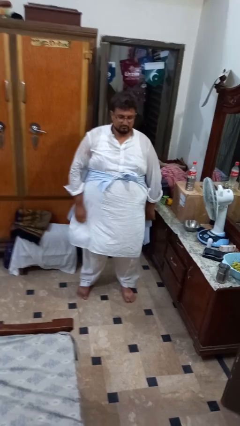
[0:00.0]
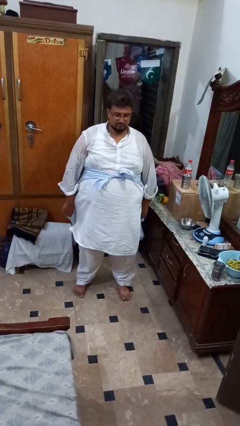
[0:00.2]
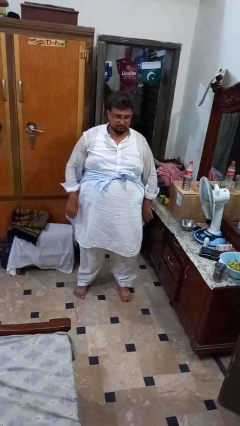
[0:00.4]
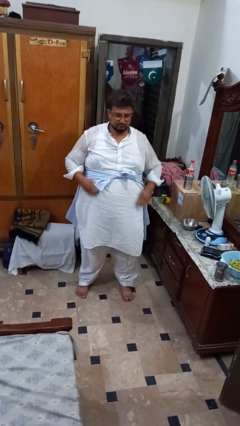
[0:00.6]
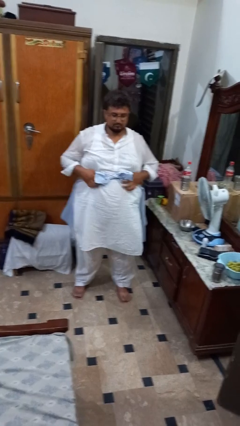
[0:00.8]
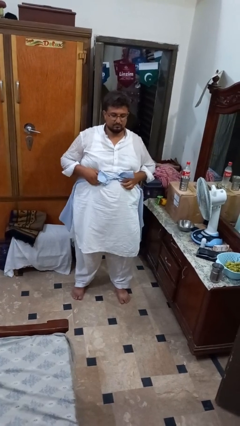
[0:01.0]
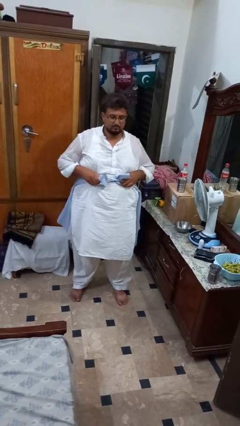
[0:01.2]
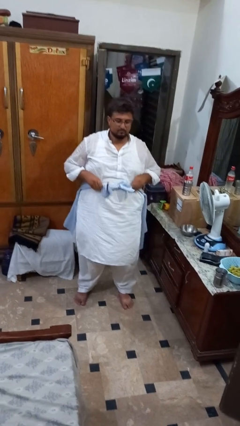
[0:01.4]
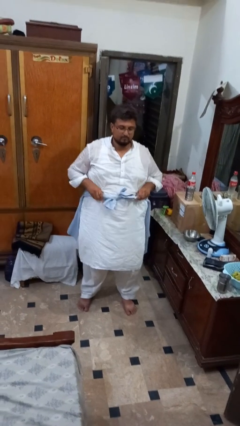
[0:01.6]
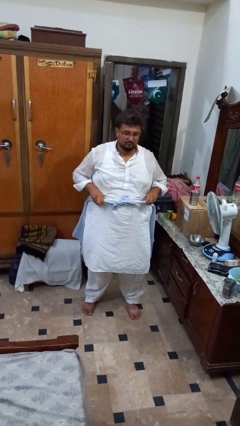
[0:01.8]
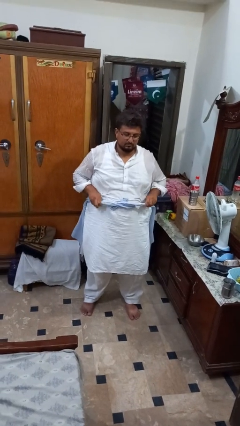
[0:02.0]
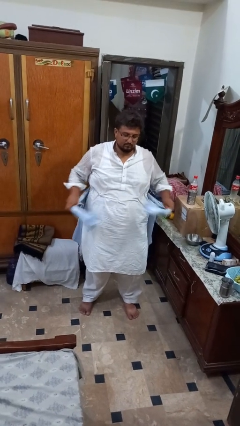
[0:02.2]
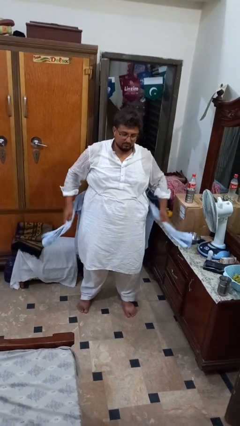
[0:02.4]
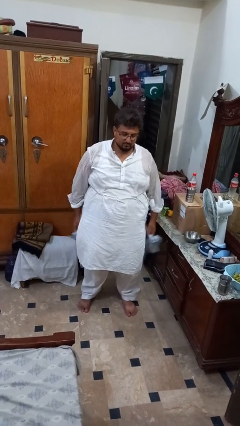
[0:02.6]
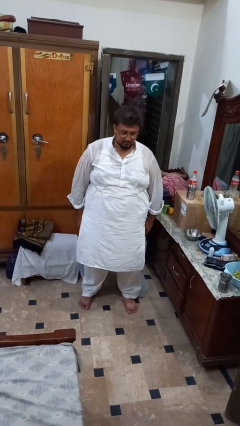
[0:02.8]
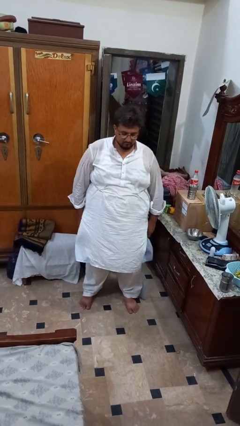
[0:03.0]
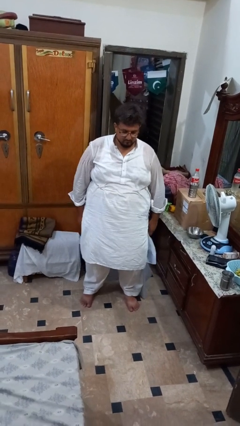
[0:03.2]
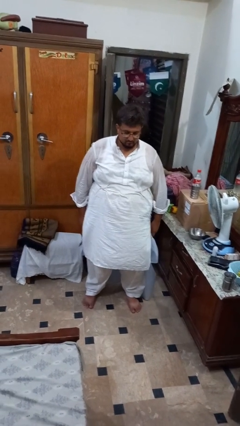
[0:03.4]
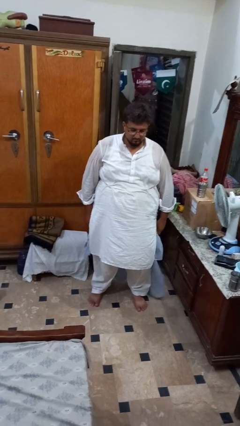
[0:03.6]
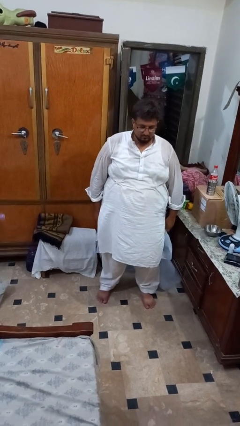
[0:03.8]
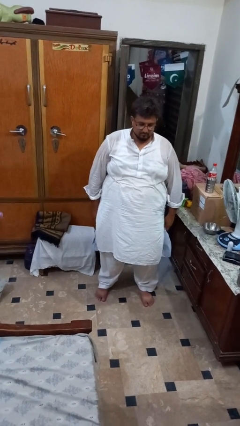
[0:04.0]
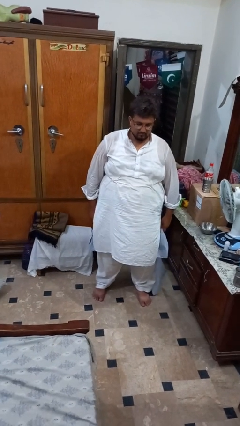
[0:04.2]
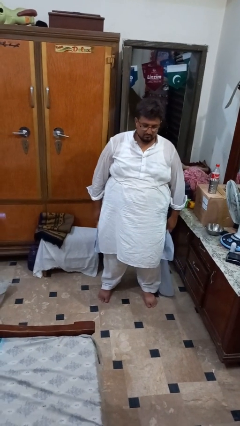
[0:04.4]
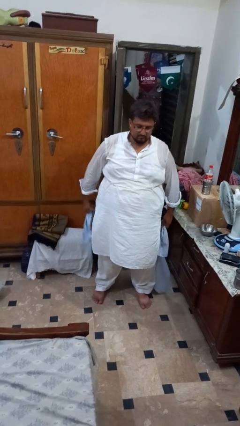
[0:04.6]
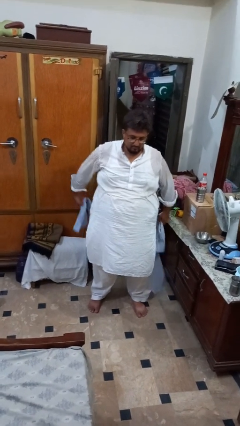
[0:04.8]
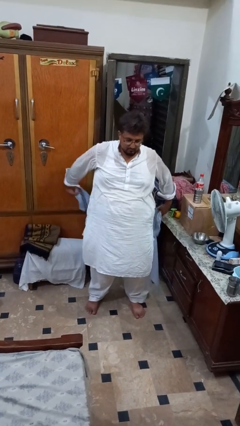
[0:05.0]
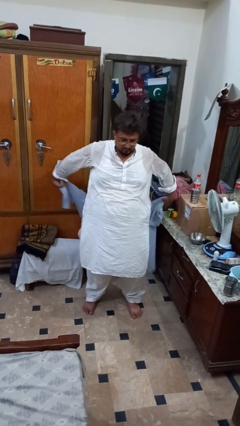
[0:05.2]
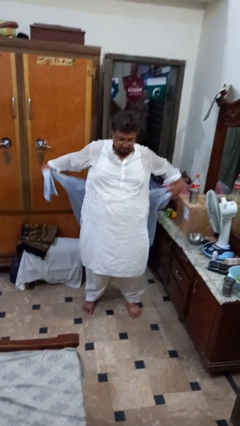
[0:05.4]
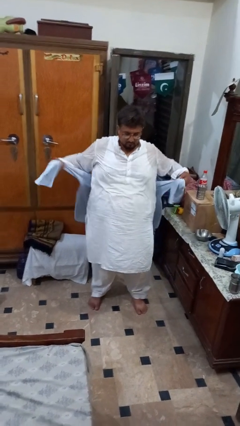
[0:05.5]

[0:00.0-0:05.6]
person unties jacket around waist

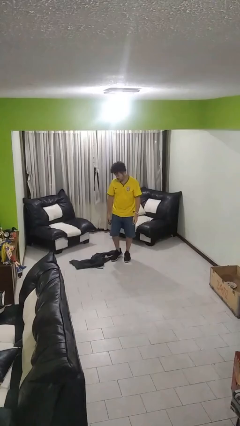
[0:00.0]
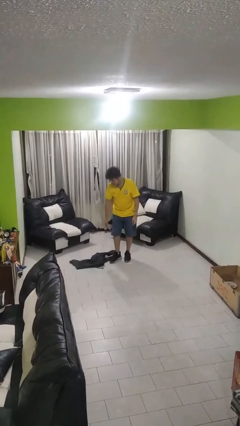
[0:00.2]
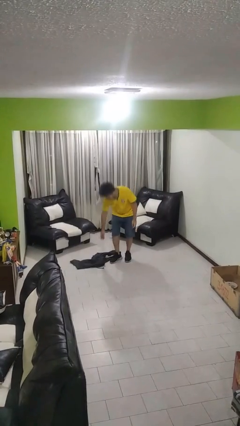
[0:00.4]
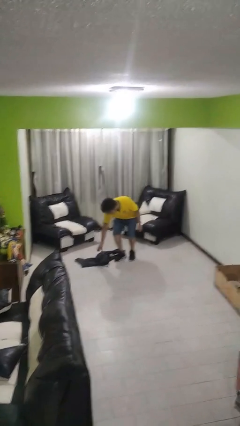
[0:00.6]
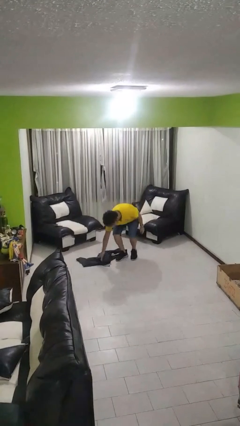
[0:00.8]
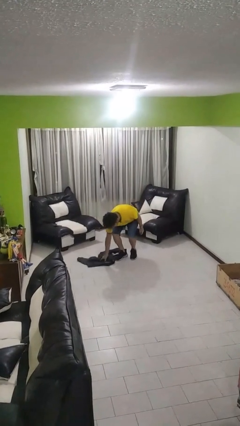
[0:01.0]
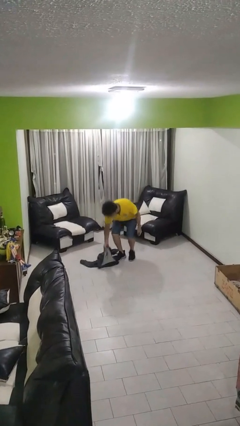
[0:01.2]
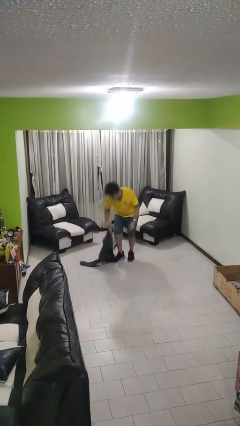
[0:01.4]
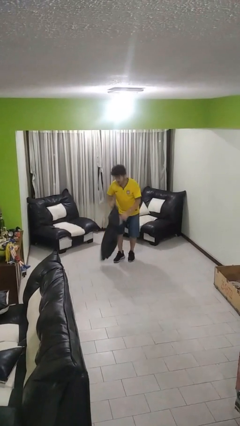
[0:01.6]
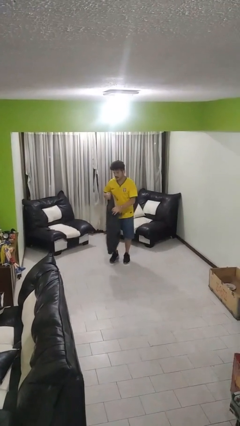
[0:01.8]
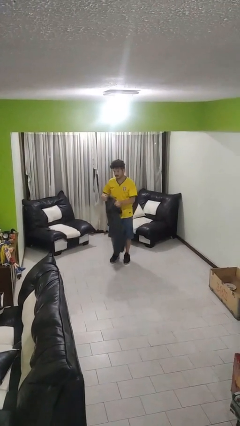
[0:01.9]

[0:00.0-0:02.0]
person picks up object from floor

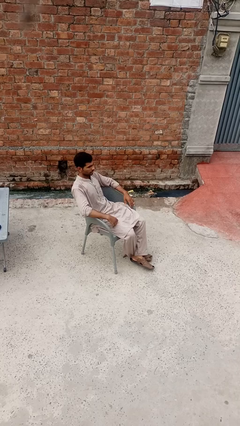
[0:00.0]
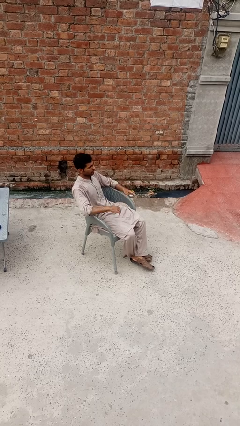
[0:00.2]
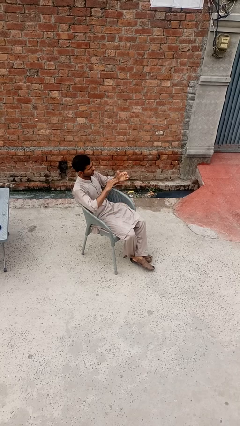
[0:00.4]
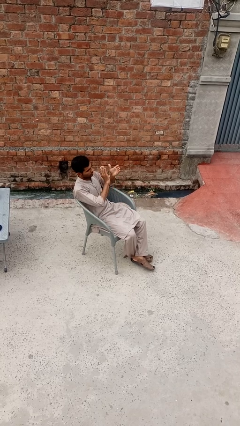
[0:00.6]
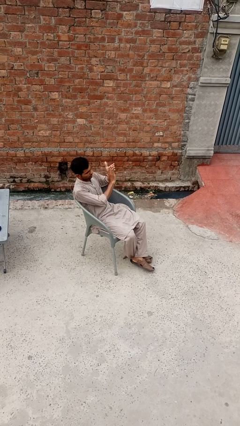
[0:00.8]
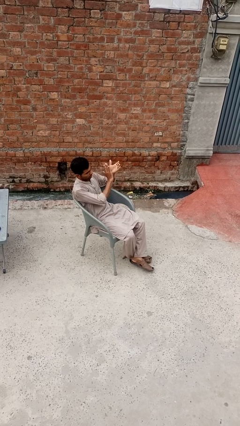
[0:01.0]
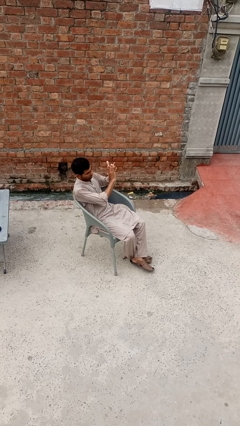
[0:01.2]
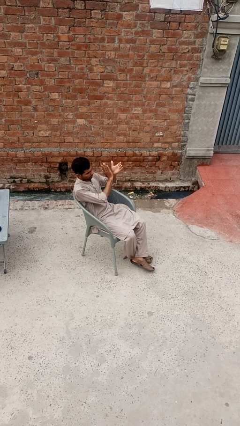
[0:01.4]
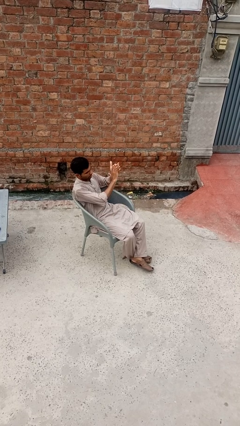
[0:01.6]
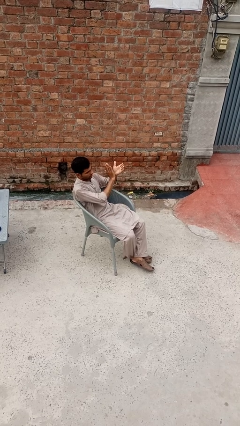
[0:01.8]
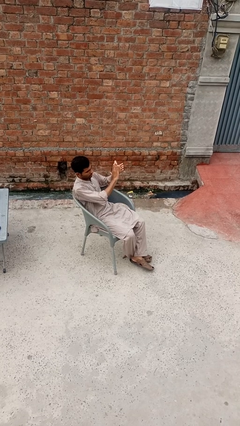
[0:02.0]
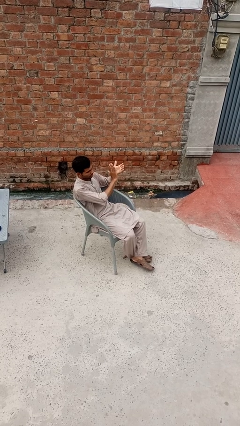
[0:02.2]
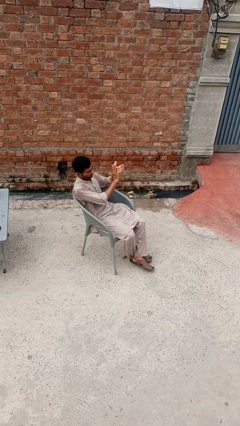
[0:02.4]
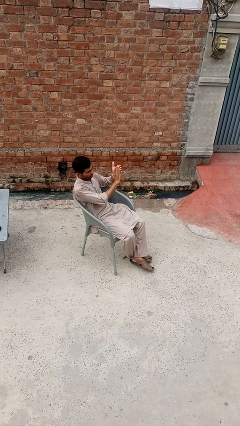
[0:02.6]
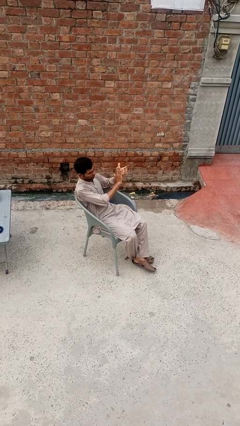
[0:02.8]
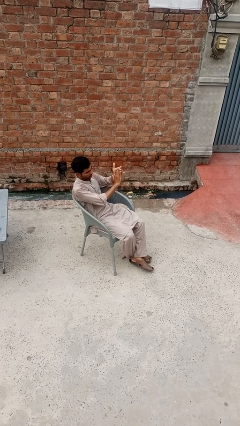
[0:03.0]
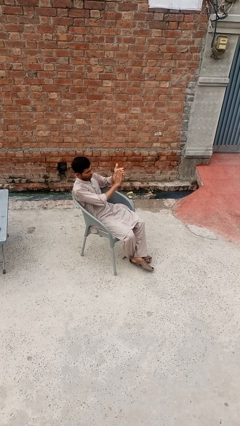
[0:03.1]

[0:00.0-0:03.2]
person claps hands

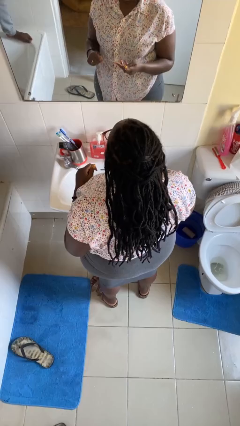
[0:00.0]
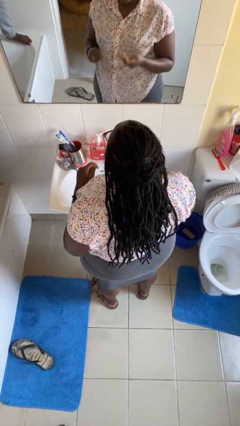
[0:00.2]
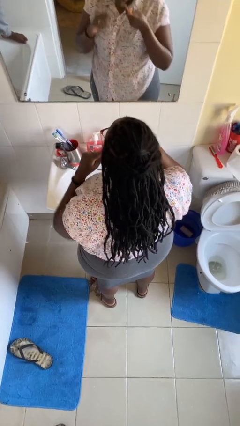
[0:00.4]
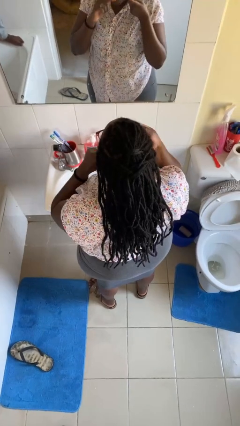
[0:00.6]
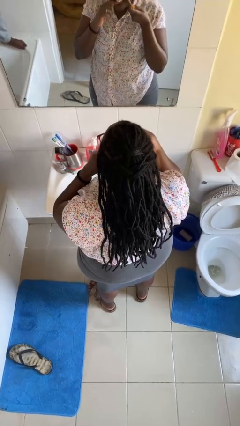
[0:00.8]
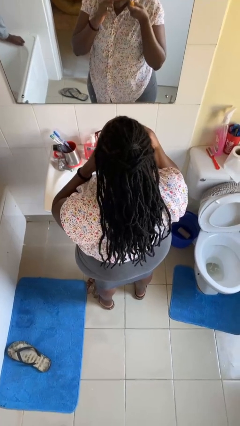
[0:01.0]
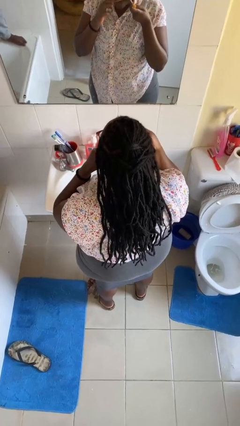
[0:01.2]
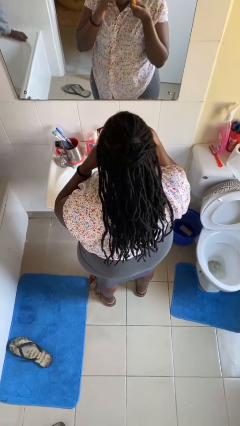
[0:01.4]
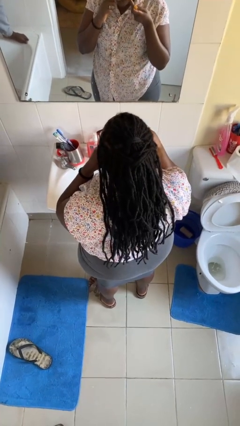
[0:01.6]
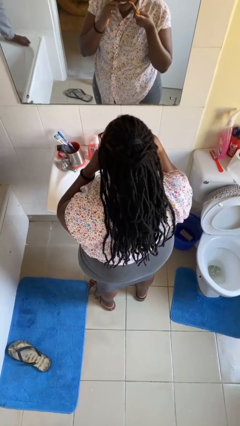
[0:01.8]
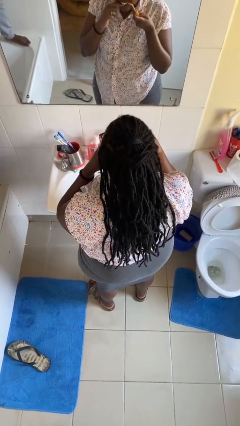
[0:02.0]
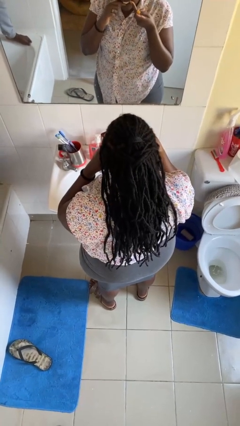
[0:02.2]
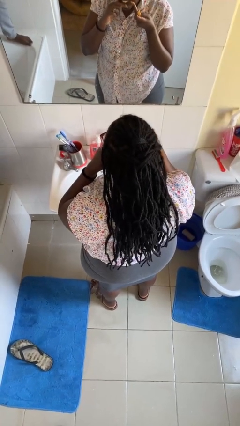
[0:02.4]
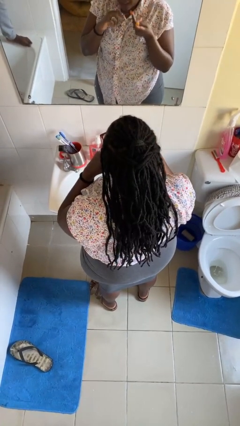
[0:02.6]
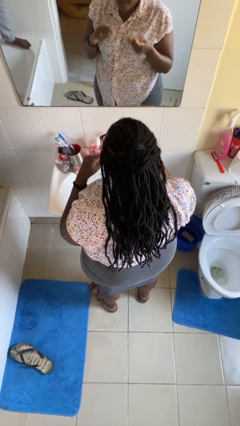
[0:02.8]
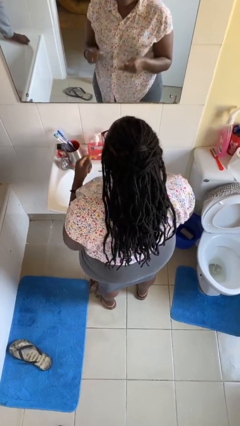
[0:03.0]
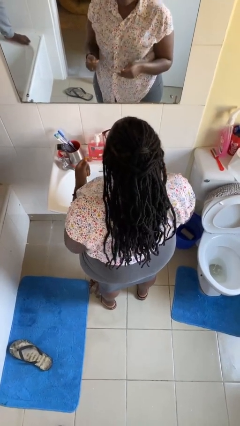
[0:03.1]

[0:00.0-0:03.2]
person flosses

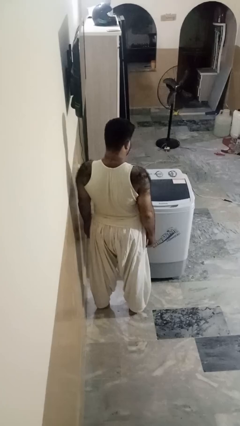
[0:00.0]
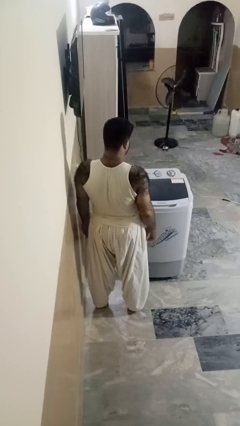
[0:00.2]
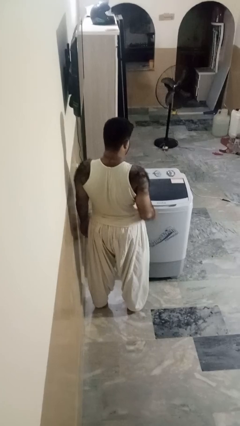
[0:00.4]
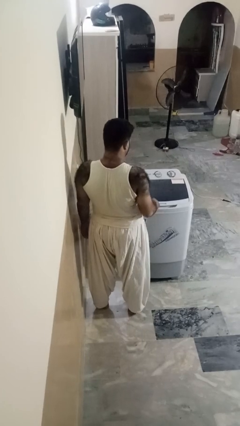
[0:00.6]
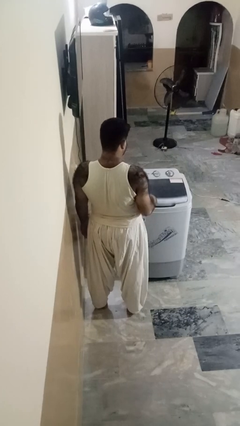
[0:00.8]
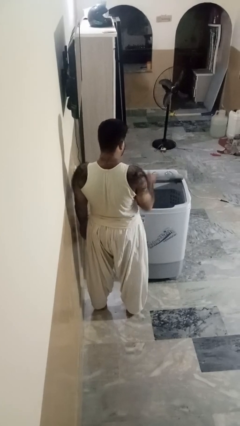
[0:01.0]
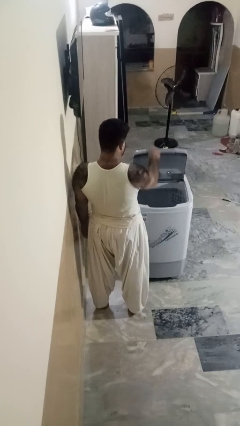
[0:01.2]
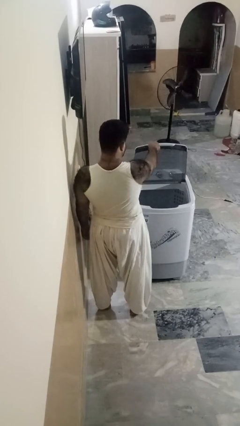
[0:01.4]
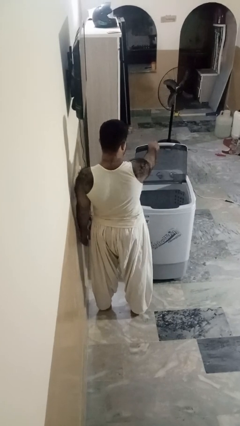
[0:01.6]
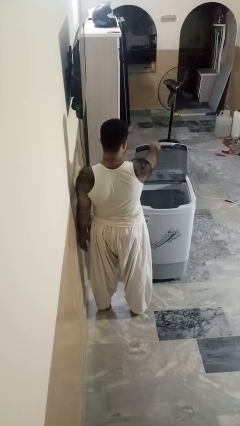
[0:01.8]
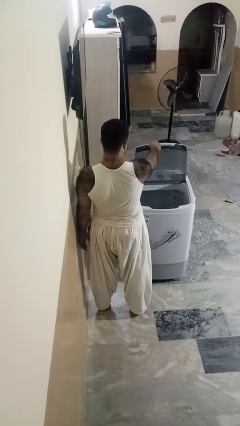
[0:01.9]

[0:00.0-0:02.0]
person opens clothes washer

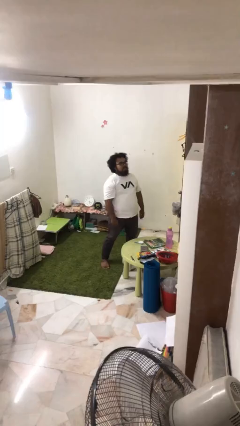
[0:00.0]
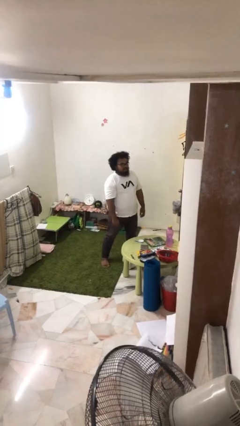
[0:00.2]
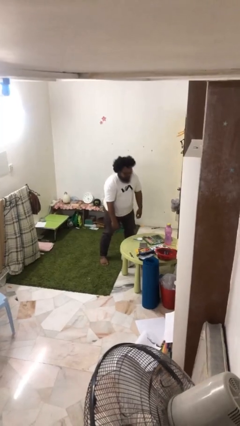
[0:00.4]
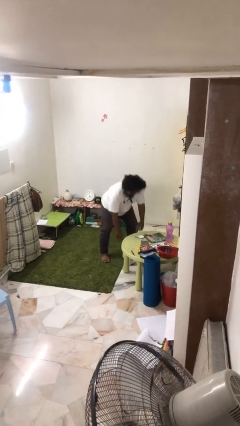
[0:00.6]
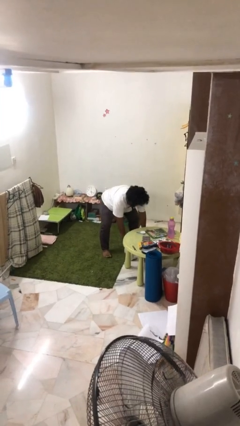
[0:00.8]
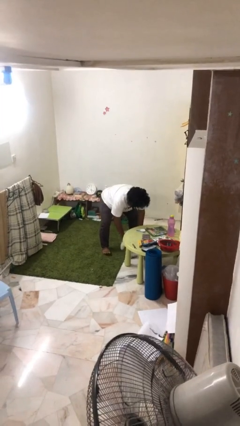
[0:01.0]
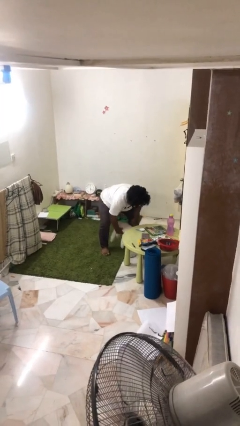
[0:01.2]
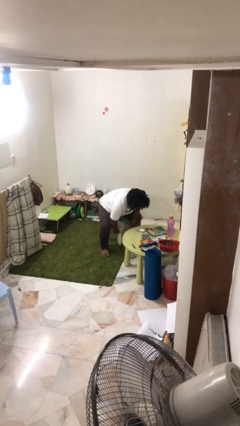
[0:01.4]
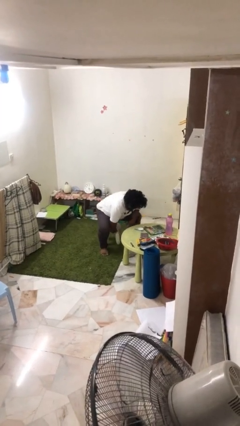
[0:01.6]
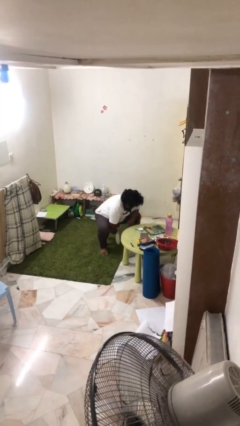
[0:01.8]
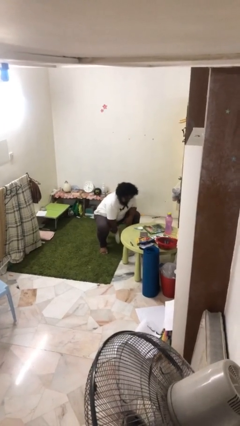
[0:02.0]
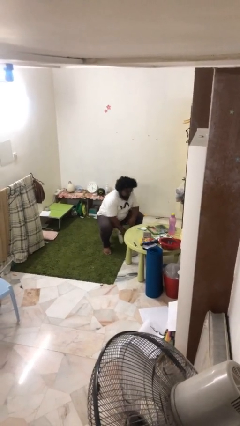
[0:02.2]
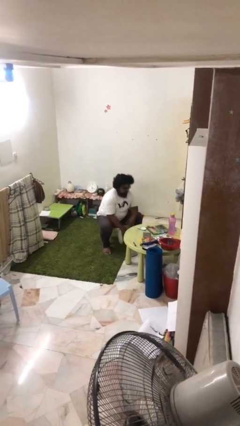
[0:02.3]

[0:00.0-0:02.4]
person sits down
